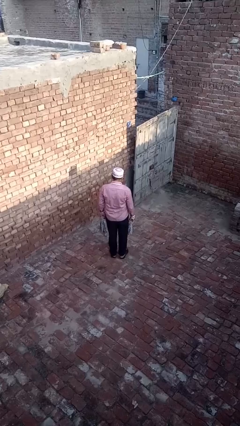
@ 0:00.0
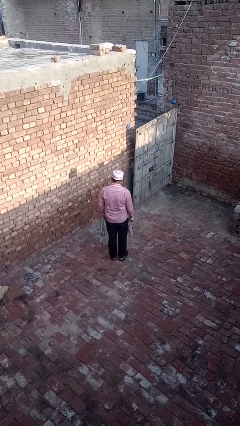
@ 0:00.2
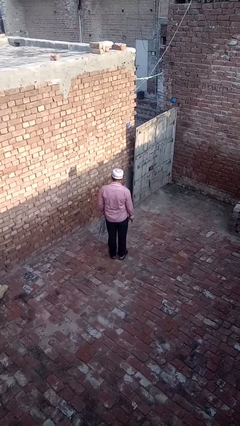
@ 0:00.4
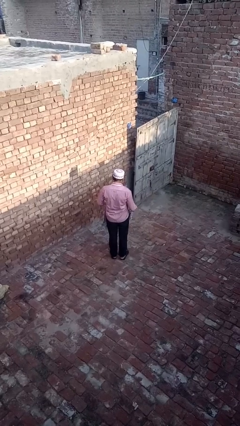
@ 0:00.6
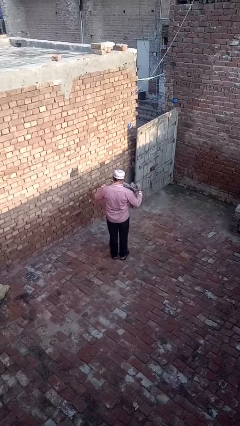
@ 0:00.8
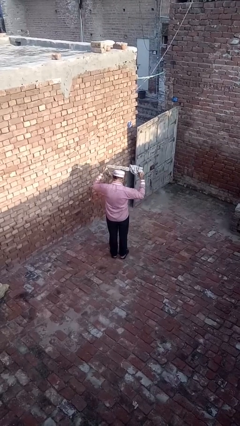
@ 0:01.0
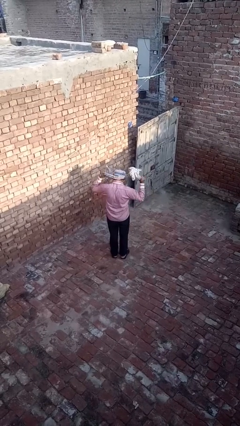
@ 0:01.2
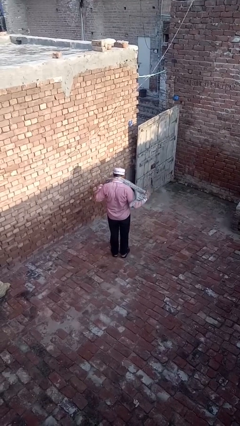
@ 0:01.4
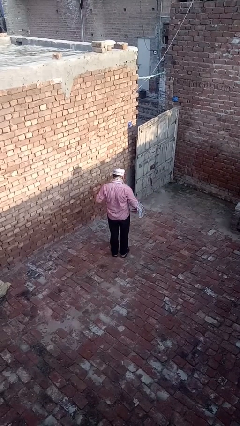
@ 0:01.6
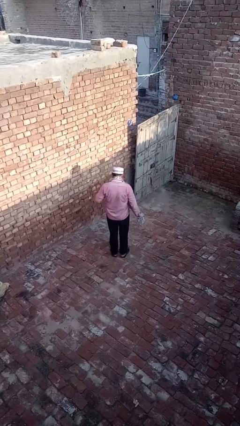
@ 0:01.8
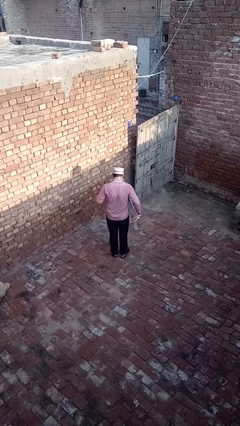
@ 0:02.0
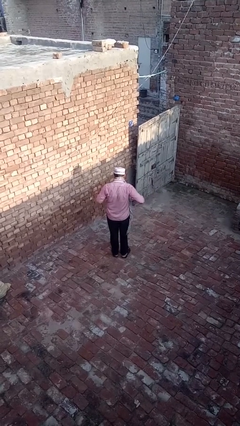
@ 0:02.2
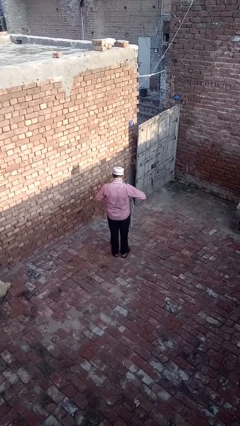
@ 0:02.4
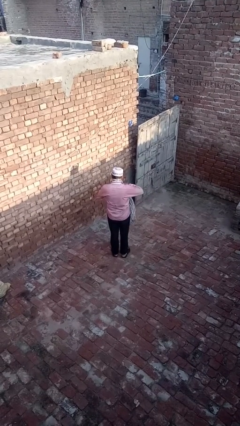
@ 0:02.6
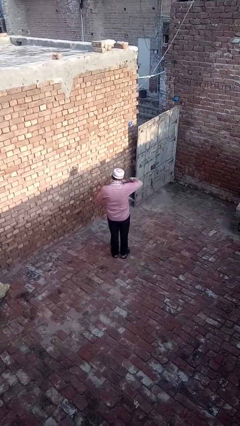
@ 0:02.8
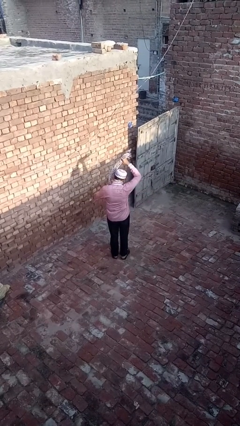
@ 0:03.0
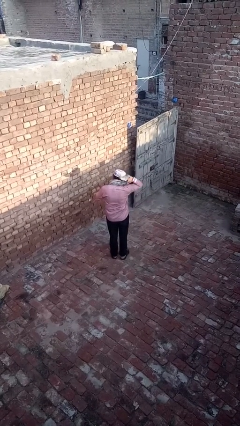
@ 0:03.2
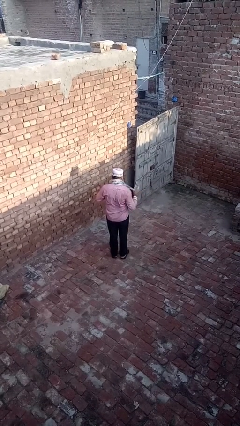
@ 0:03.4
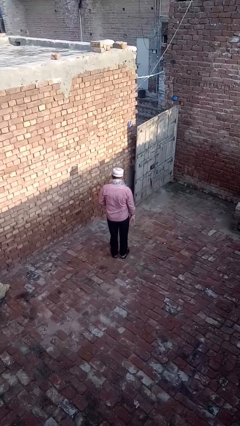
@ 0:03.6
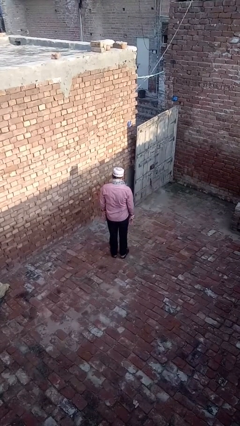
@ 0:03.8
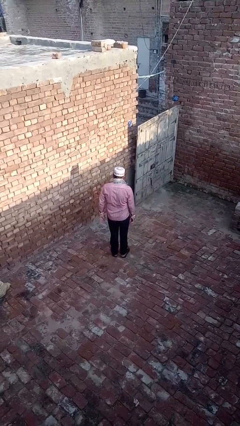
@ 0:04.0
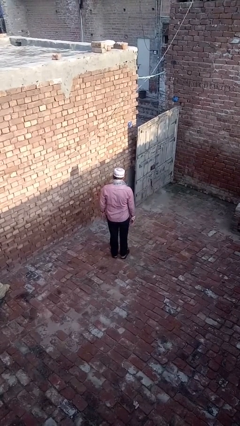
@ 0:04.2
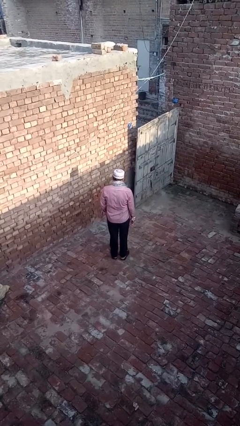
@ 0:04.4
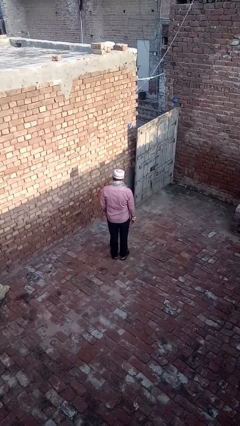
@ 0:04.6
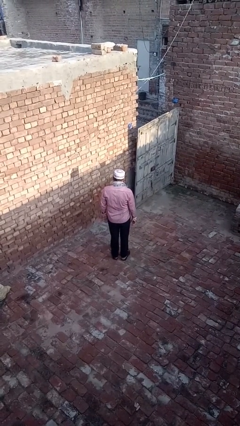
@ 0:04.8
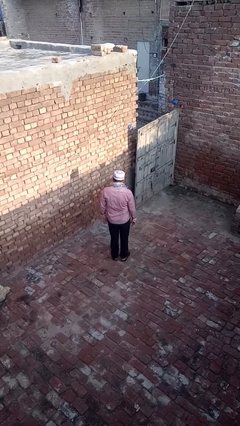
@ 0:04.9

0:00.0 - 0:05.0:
person puts on scarf

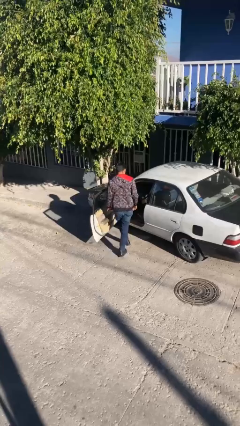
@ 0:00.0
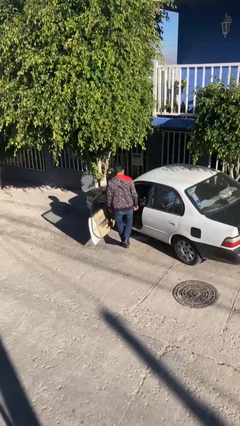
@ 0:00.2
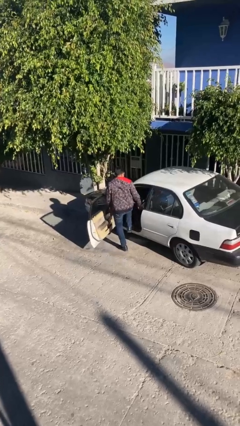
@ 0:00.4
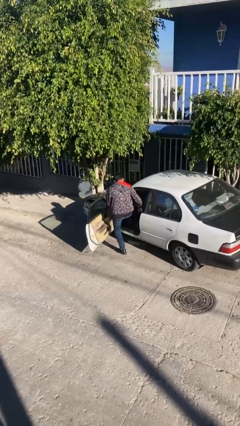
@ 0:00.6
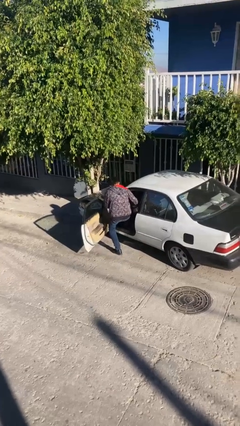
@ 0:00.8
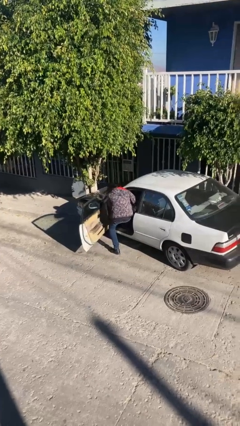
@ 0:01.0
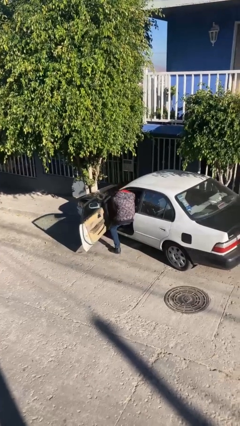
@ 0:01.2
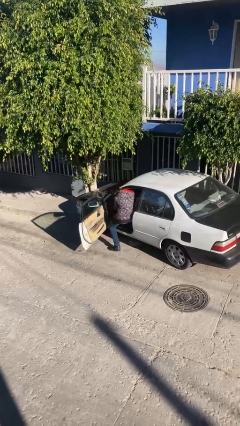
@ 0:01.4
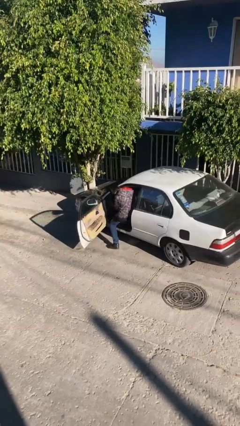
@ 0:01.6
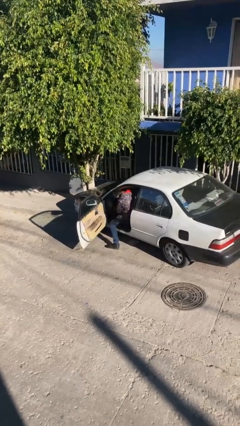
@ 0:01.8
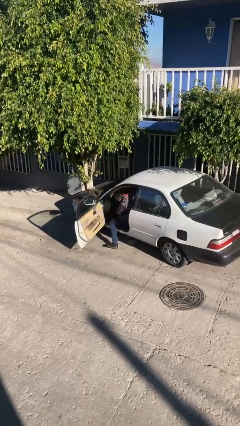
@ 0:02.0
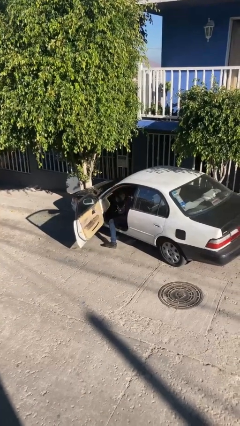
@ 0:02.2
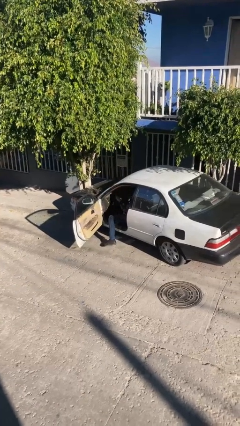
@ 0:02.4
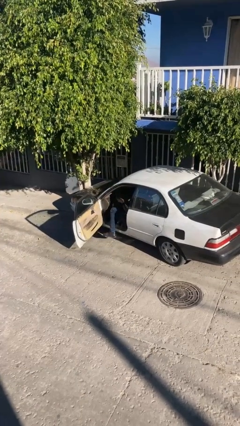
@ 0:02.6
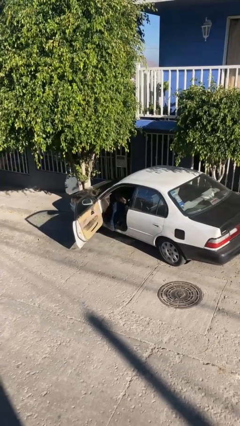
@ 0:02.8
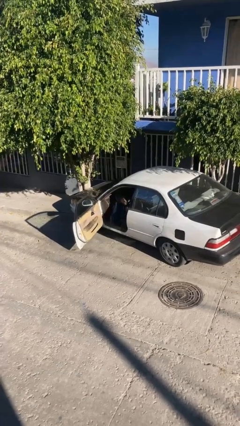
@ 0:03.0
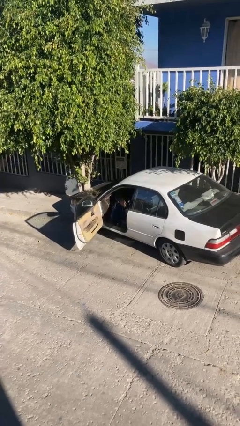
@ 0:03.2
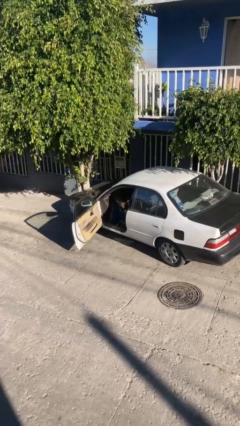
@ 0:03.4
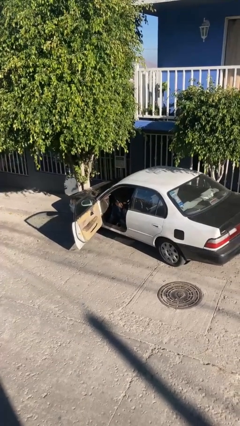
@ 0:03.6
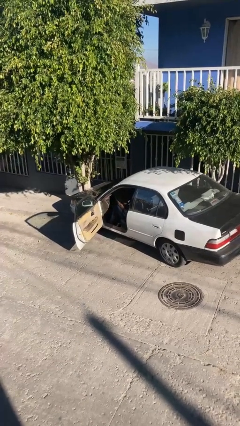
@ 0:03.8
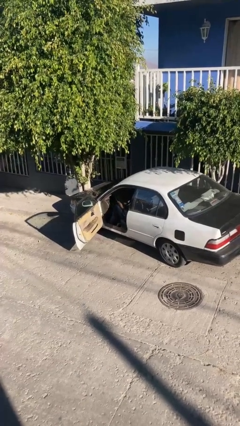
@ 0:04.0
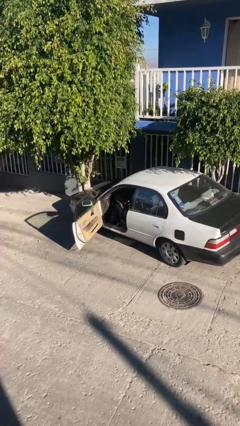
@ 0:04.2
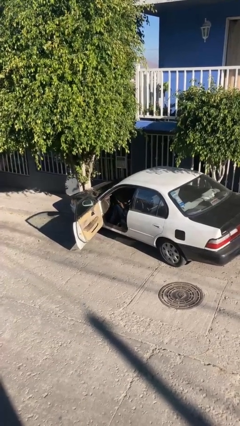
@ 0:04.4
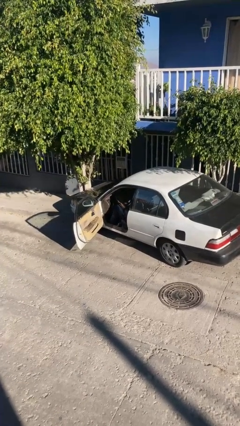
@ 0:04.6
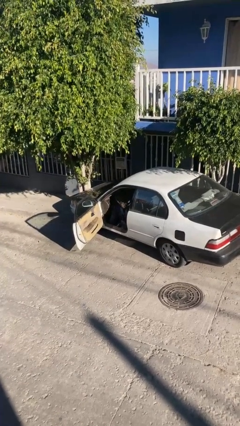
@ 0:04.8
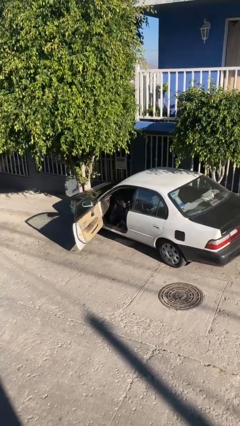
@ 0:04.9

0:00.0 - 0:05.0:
person enters car

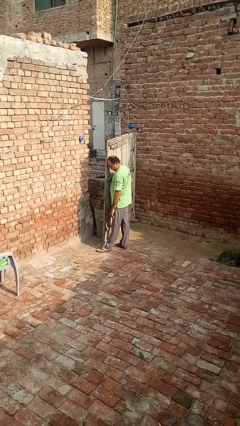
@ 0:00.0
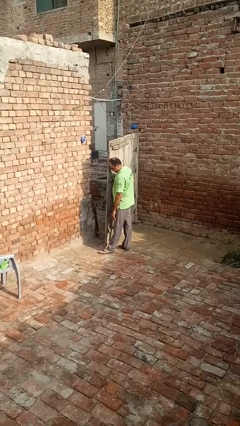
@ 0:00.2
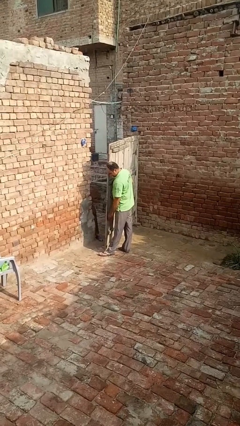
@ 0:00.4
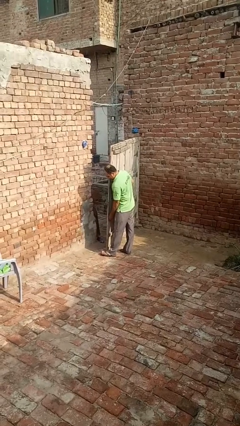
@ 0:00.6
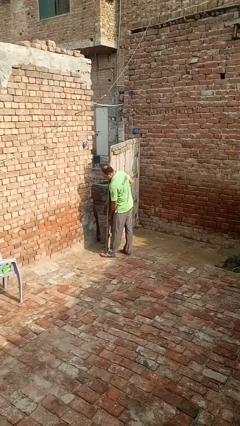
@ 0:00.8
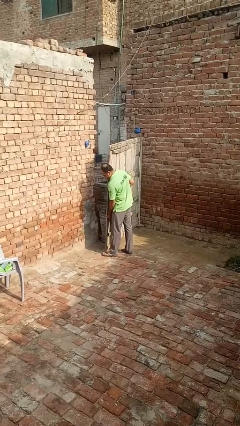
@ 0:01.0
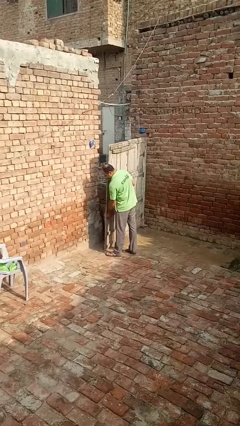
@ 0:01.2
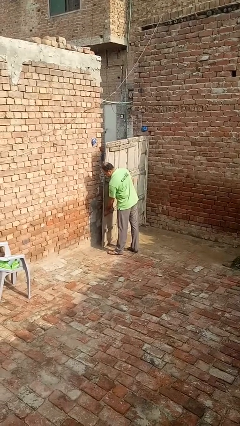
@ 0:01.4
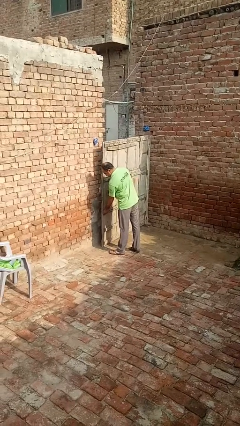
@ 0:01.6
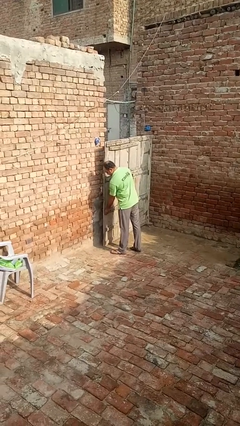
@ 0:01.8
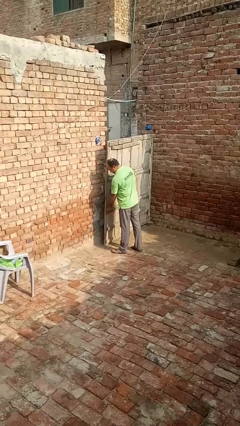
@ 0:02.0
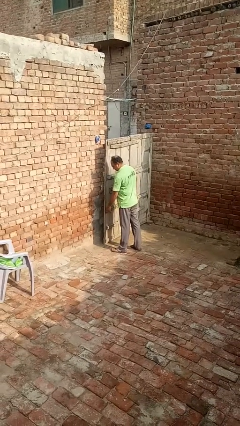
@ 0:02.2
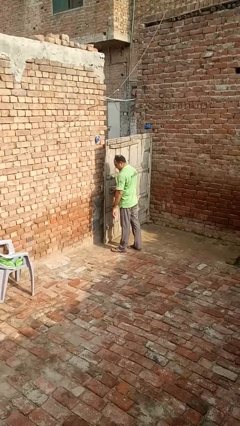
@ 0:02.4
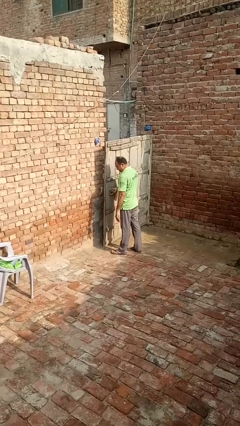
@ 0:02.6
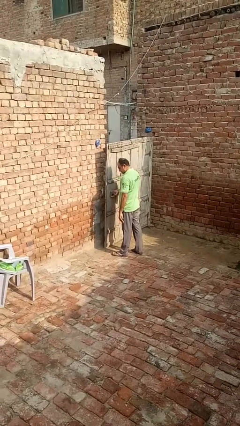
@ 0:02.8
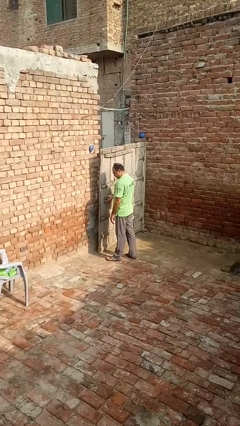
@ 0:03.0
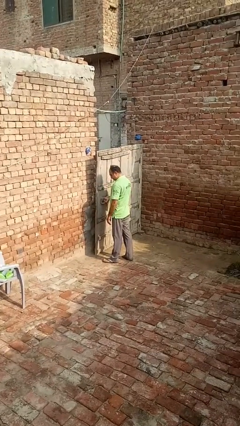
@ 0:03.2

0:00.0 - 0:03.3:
person closes gate

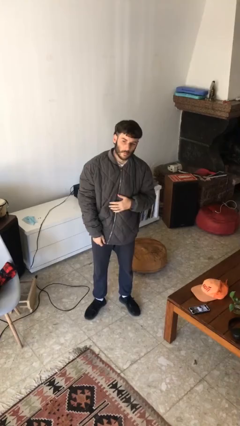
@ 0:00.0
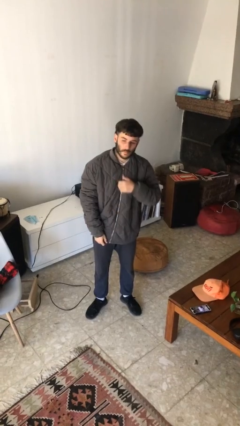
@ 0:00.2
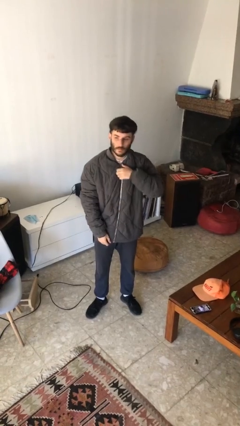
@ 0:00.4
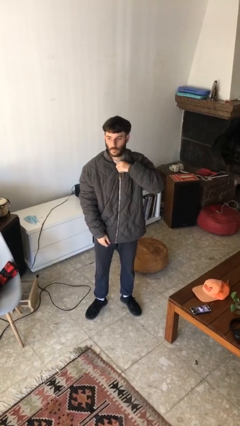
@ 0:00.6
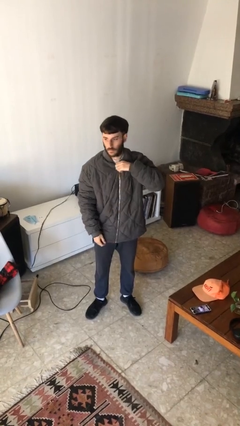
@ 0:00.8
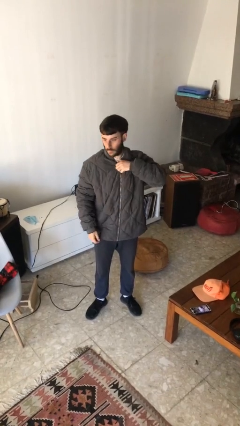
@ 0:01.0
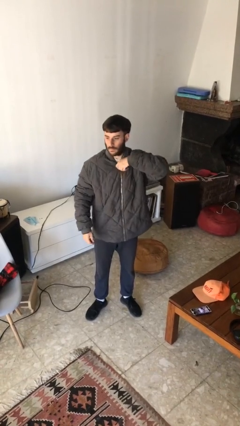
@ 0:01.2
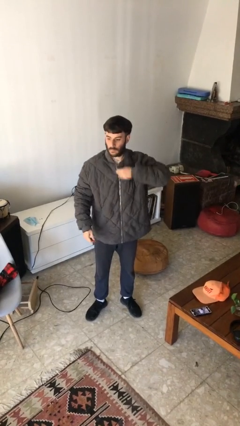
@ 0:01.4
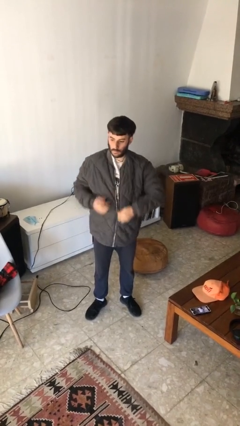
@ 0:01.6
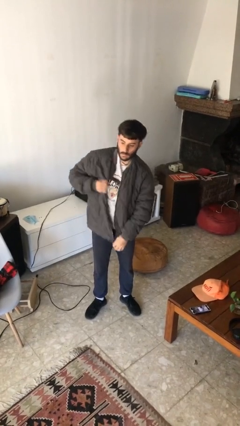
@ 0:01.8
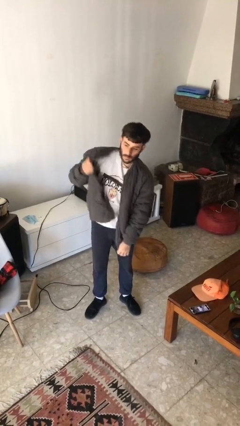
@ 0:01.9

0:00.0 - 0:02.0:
person unzips jacket

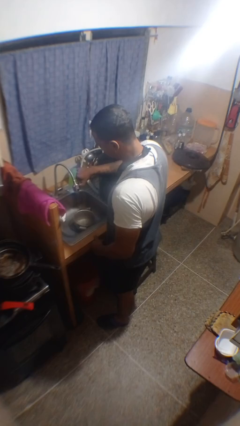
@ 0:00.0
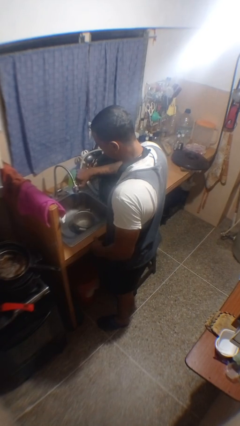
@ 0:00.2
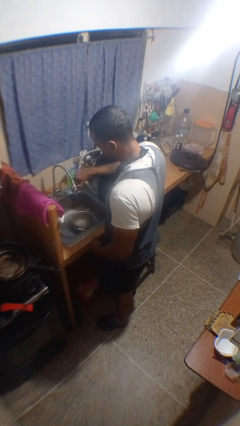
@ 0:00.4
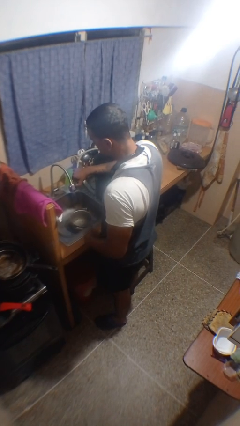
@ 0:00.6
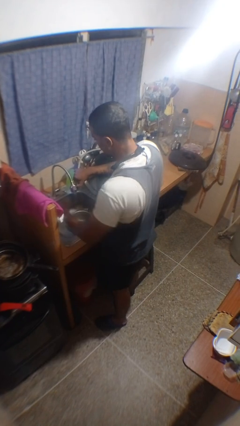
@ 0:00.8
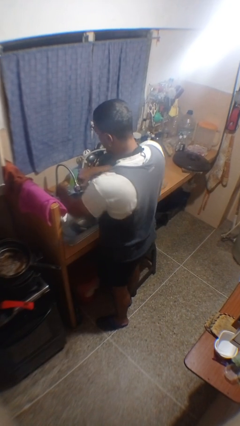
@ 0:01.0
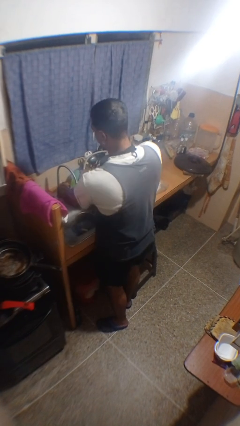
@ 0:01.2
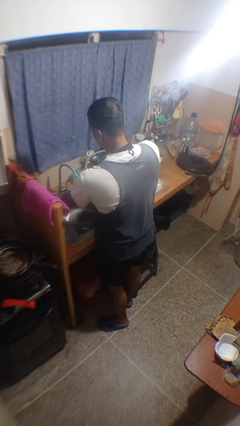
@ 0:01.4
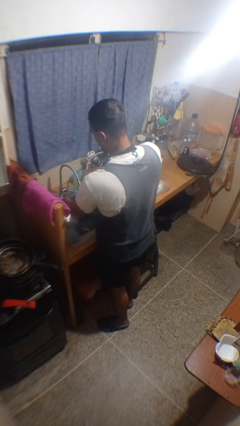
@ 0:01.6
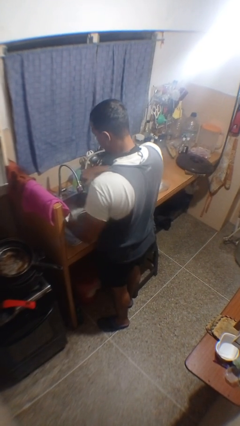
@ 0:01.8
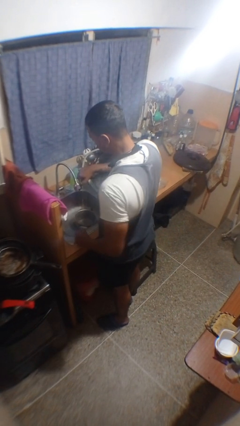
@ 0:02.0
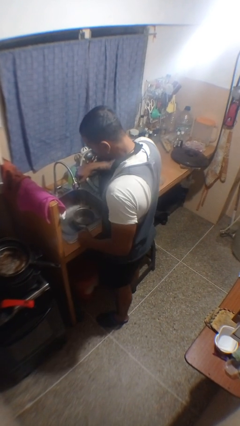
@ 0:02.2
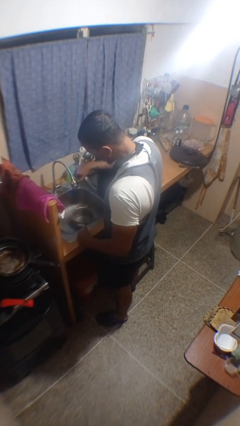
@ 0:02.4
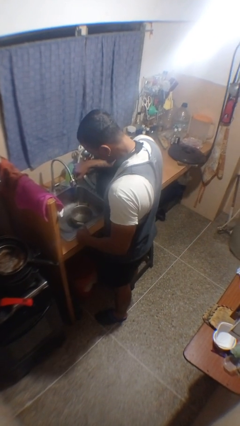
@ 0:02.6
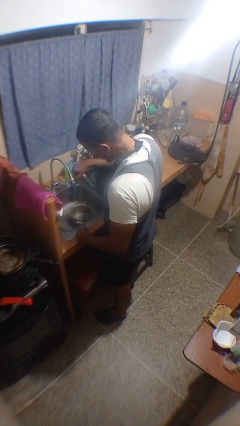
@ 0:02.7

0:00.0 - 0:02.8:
person turns on faucet
